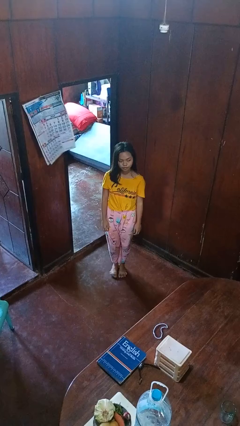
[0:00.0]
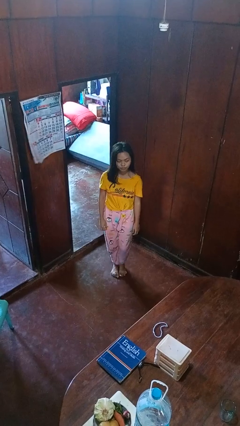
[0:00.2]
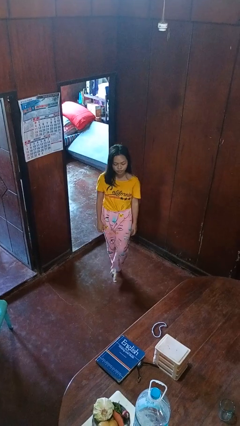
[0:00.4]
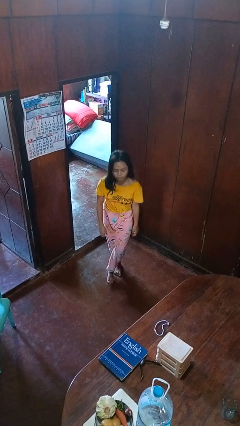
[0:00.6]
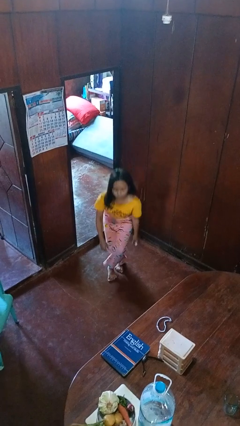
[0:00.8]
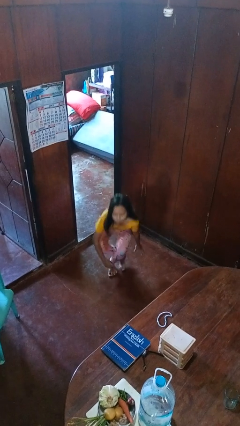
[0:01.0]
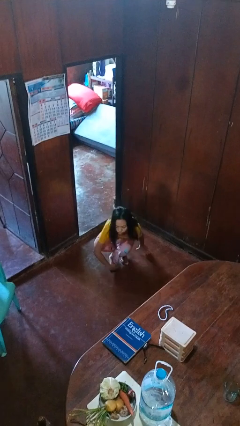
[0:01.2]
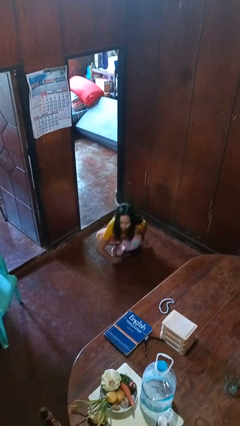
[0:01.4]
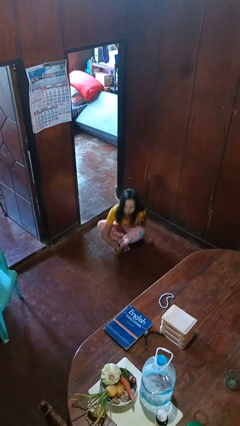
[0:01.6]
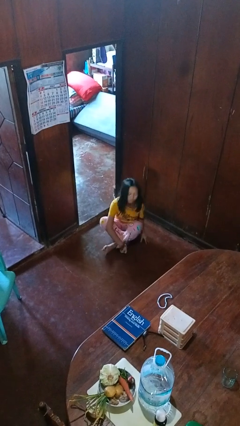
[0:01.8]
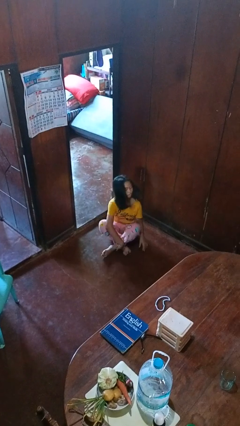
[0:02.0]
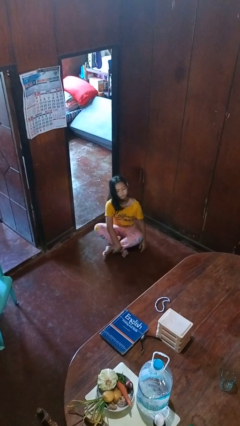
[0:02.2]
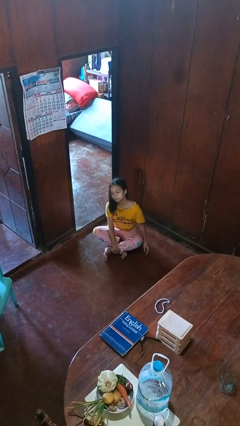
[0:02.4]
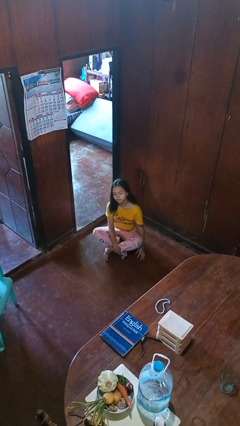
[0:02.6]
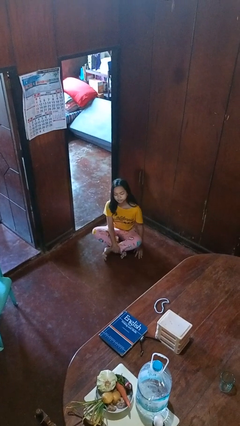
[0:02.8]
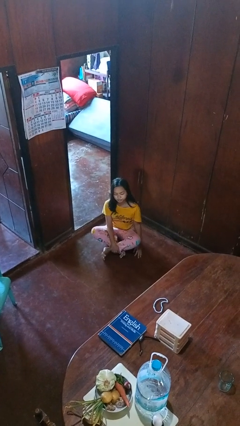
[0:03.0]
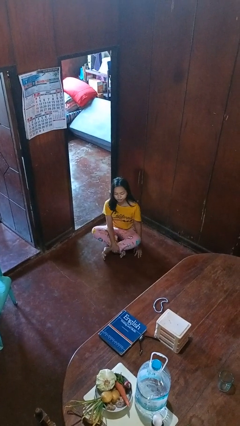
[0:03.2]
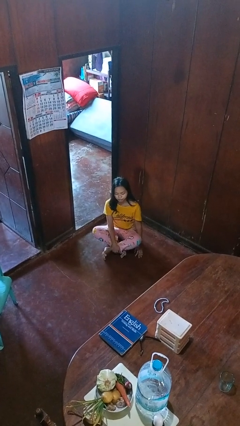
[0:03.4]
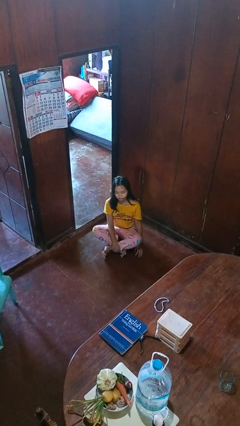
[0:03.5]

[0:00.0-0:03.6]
person sits crisscross

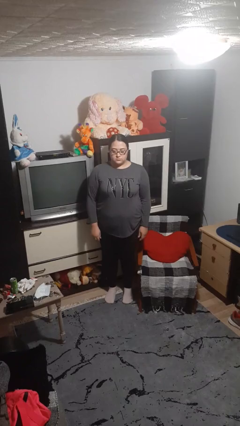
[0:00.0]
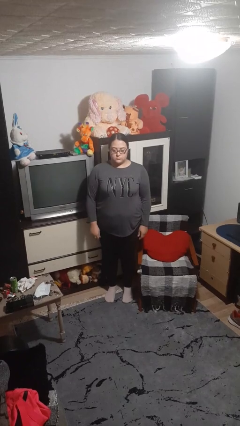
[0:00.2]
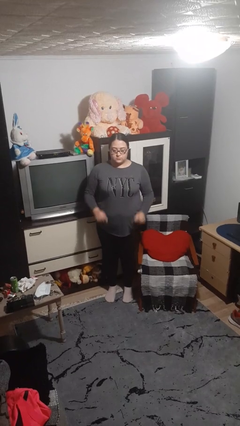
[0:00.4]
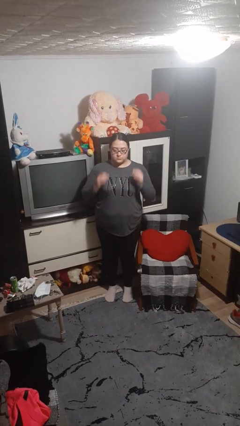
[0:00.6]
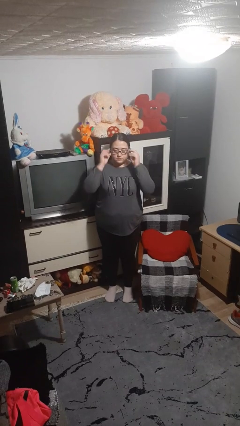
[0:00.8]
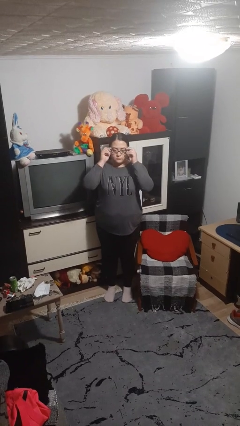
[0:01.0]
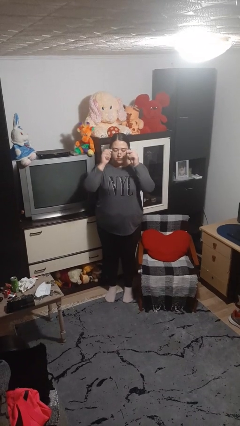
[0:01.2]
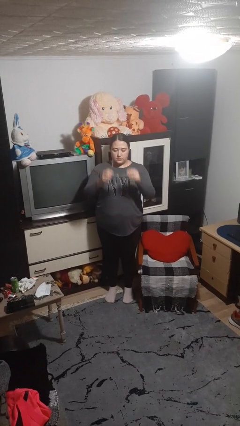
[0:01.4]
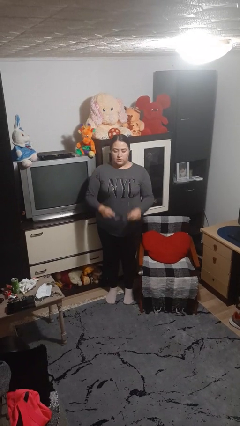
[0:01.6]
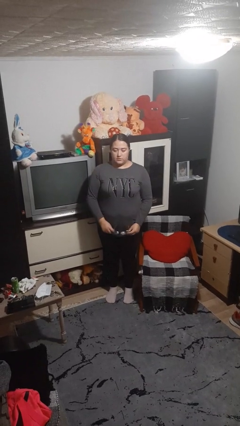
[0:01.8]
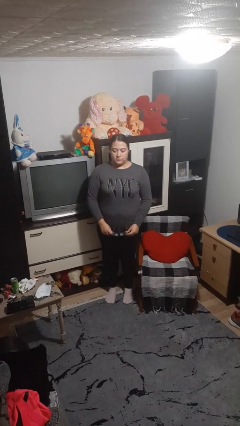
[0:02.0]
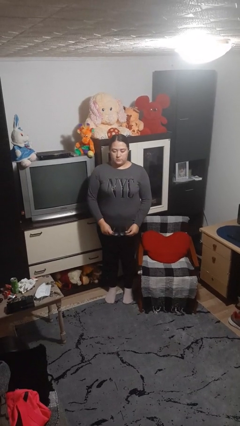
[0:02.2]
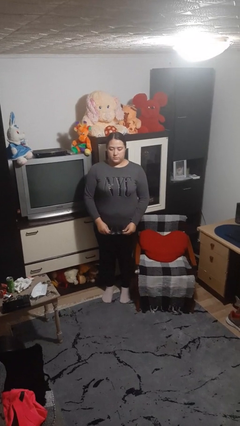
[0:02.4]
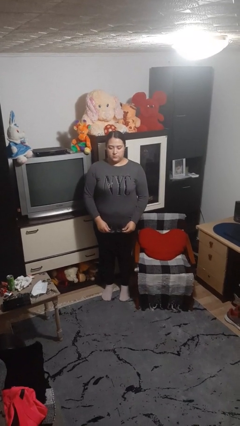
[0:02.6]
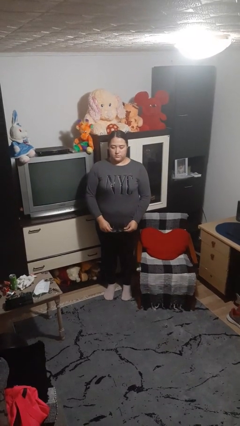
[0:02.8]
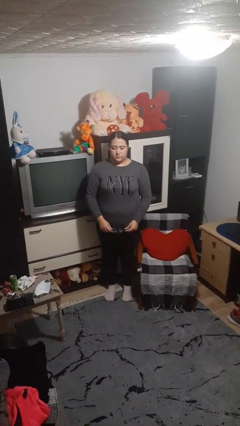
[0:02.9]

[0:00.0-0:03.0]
person takes off glasses

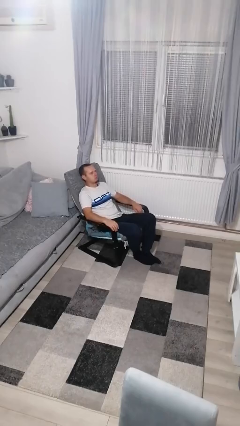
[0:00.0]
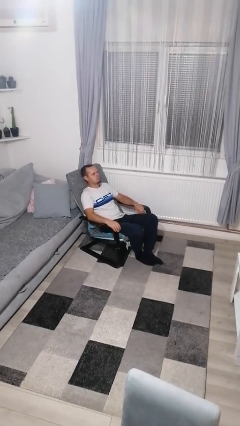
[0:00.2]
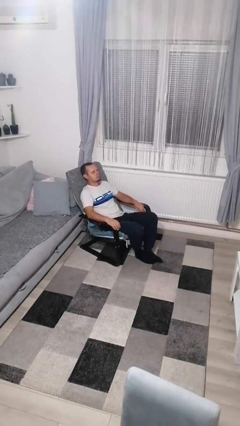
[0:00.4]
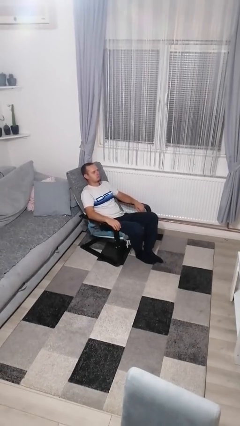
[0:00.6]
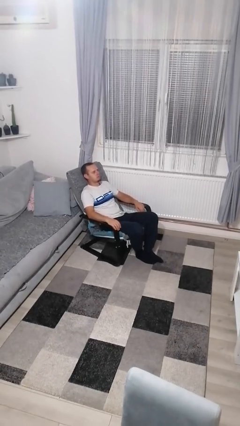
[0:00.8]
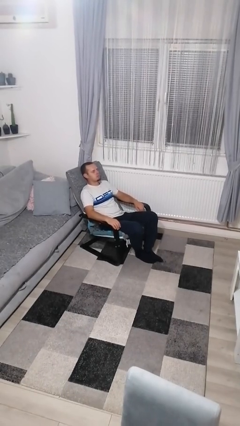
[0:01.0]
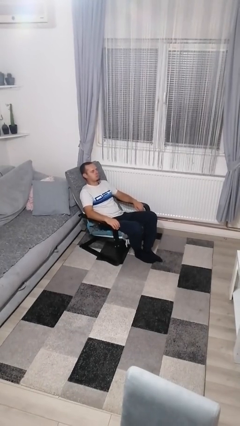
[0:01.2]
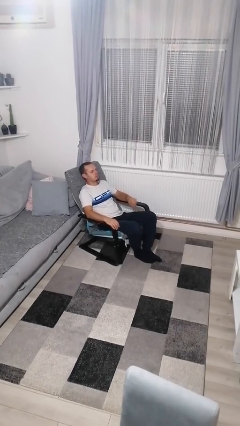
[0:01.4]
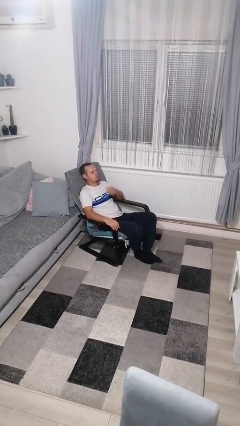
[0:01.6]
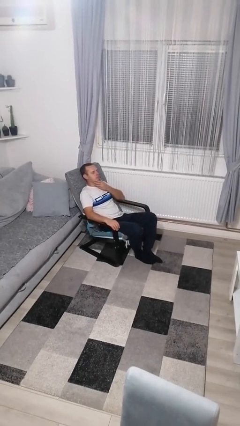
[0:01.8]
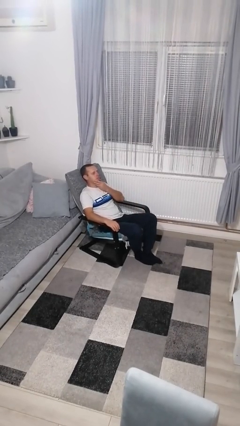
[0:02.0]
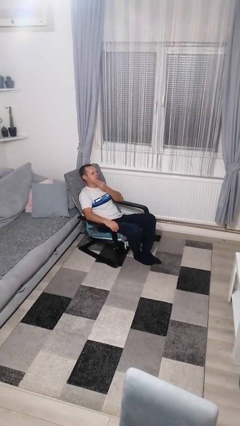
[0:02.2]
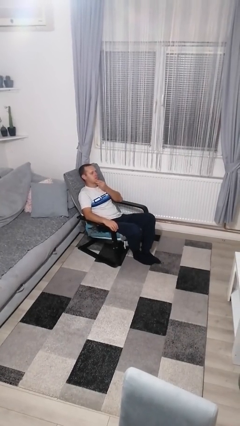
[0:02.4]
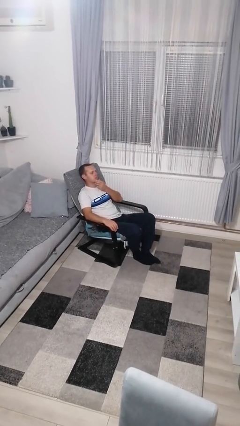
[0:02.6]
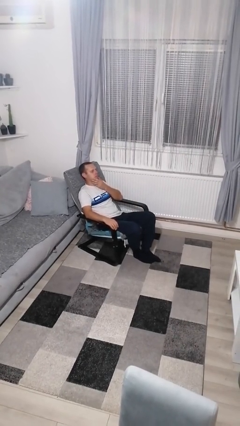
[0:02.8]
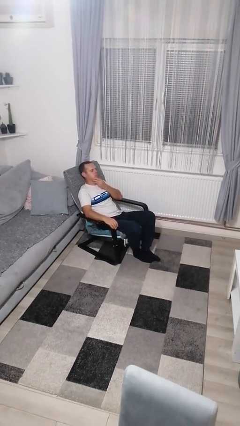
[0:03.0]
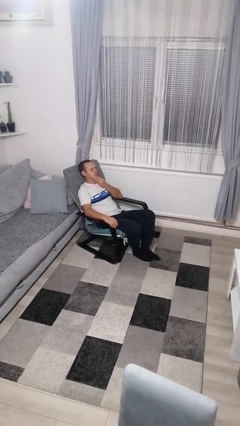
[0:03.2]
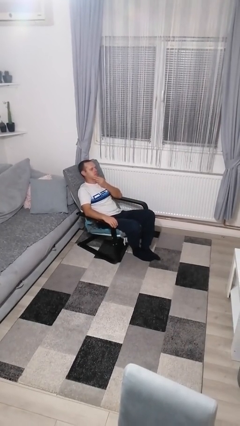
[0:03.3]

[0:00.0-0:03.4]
person strokes chin

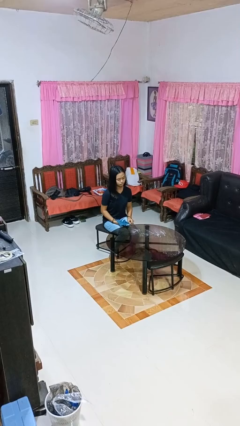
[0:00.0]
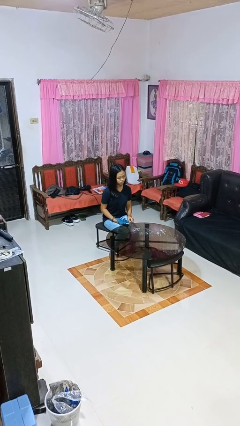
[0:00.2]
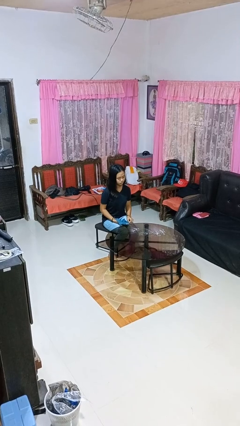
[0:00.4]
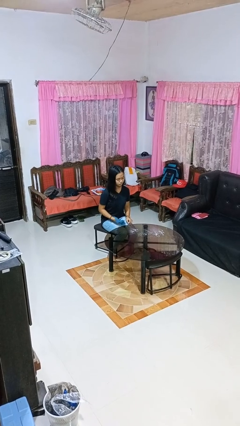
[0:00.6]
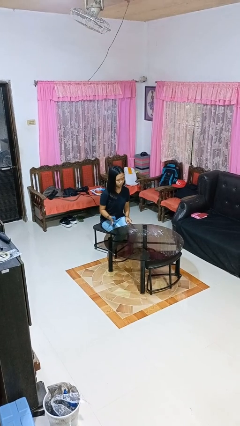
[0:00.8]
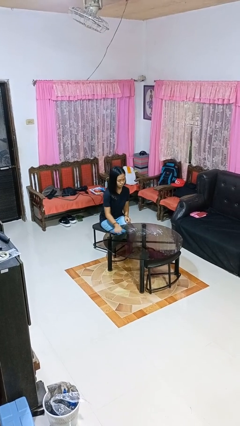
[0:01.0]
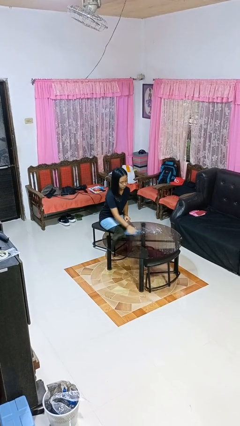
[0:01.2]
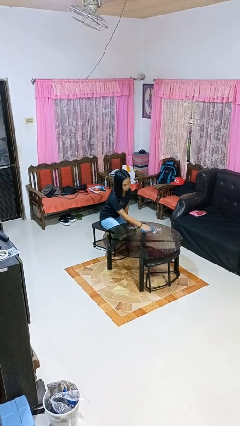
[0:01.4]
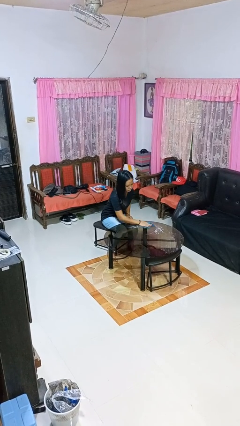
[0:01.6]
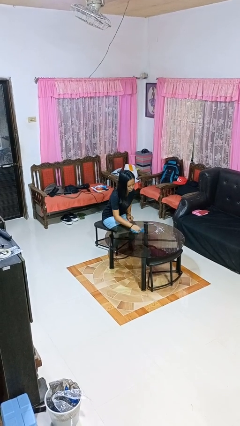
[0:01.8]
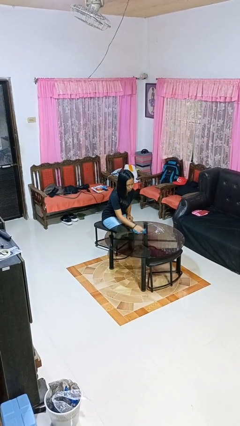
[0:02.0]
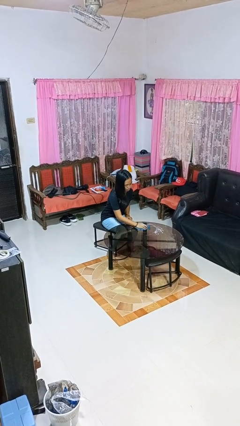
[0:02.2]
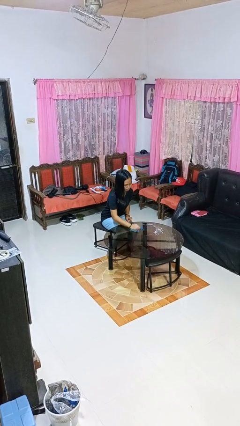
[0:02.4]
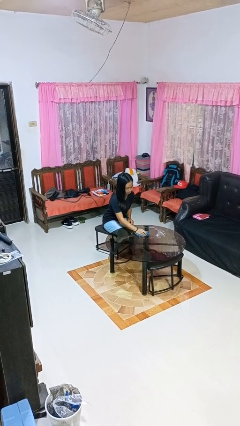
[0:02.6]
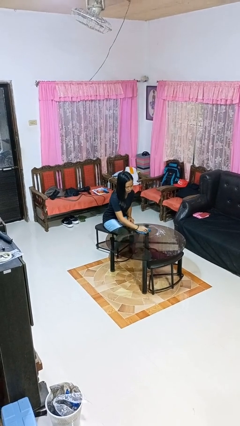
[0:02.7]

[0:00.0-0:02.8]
person cleans table with rag

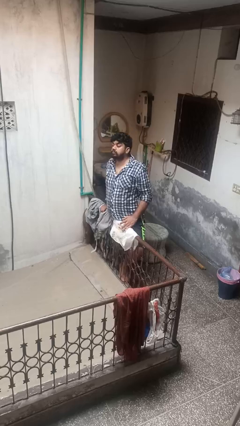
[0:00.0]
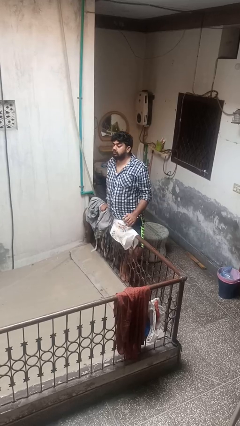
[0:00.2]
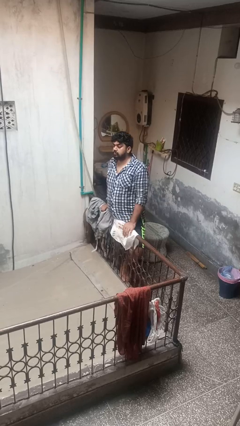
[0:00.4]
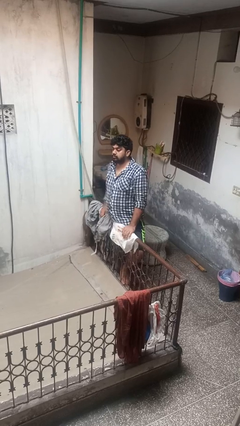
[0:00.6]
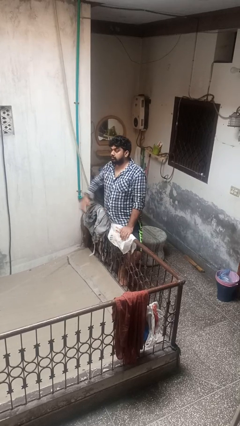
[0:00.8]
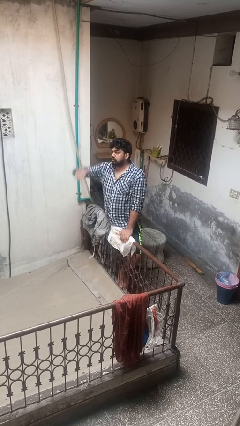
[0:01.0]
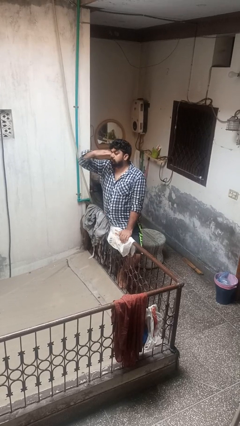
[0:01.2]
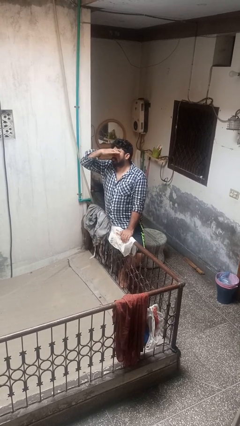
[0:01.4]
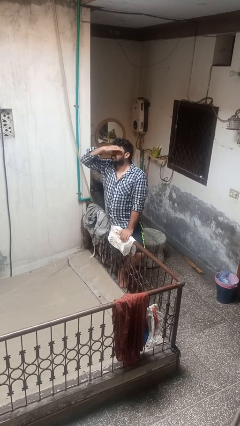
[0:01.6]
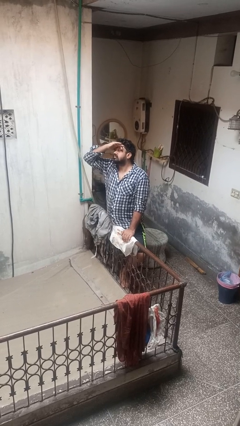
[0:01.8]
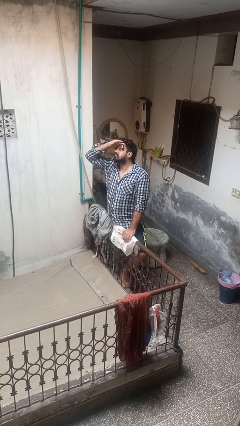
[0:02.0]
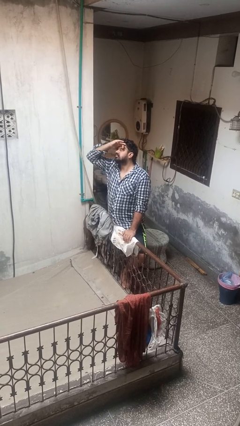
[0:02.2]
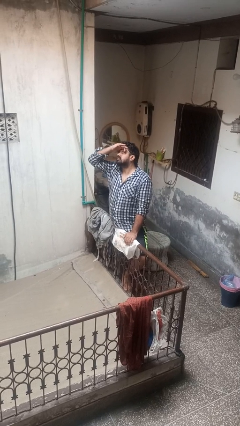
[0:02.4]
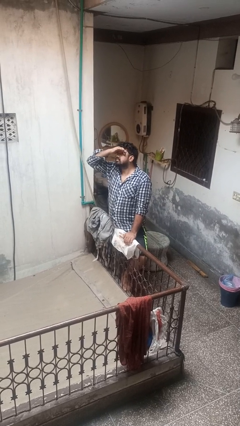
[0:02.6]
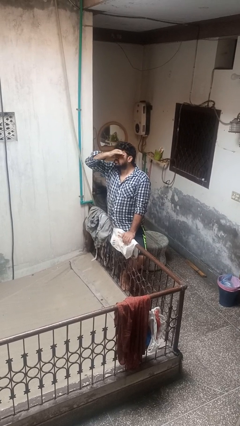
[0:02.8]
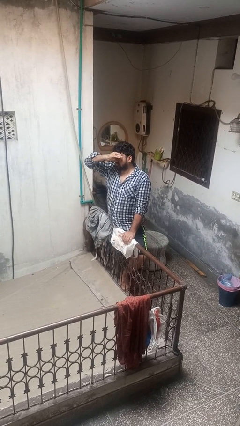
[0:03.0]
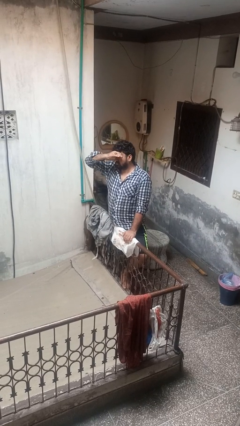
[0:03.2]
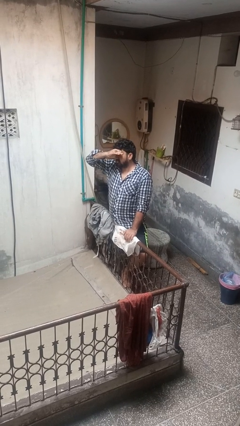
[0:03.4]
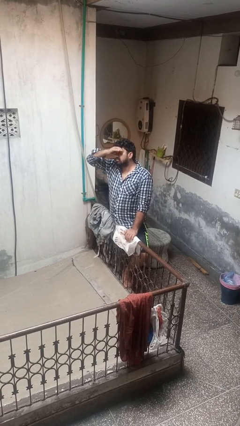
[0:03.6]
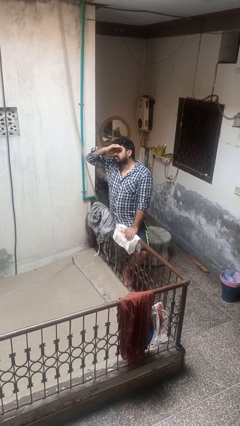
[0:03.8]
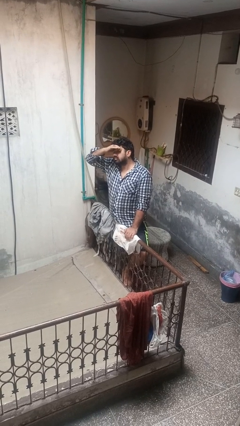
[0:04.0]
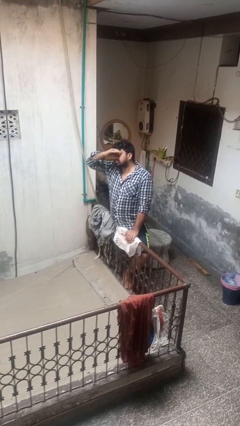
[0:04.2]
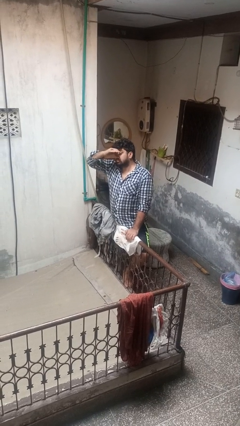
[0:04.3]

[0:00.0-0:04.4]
person shades eyes

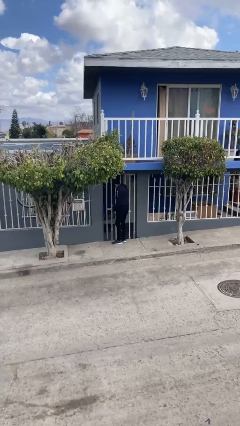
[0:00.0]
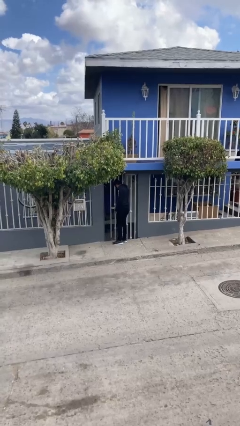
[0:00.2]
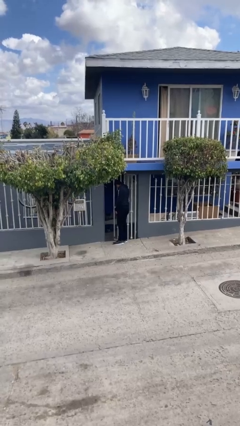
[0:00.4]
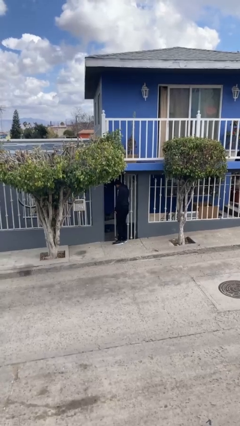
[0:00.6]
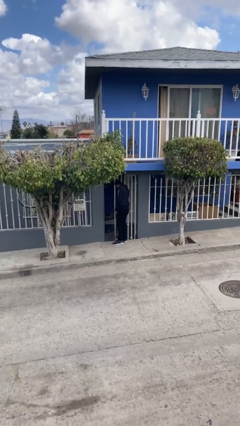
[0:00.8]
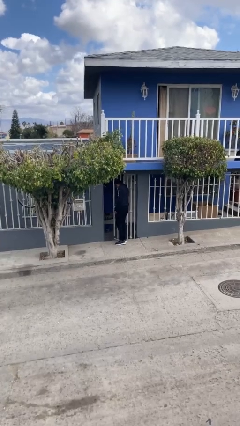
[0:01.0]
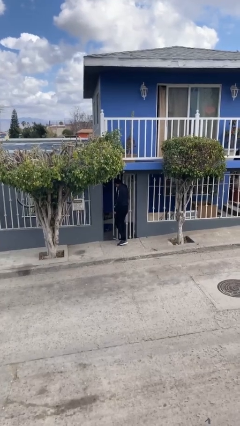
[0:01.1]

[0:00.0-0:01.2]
person opens facility door
